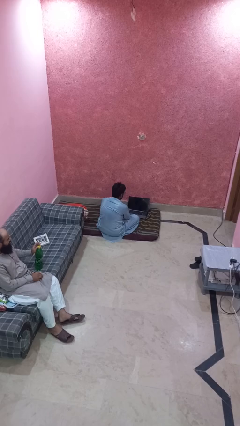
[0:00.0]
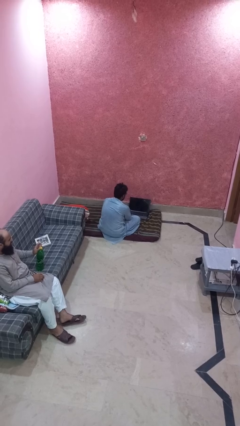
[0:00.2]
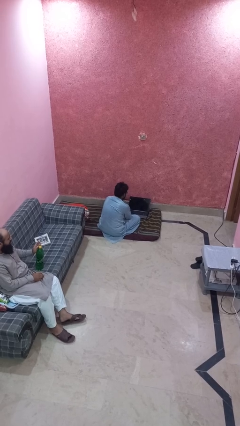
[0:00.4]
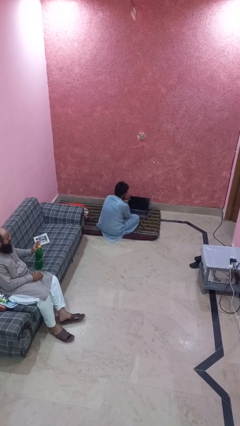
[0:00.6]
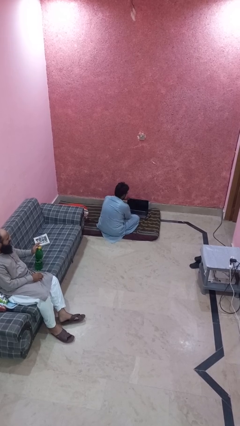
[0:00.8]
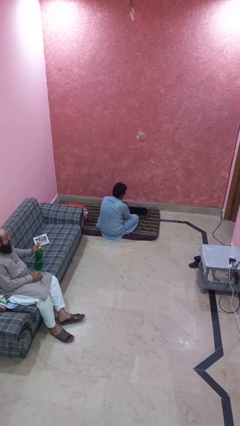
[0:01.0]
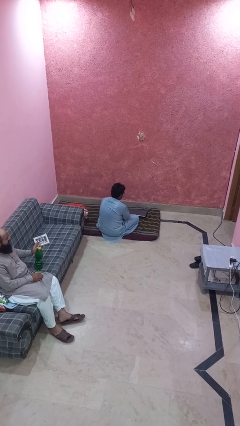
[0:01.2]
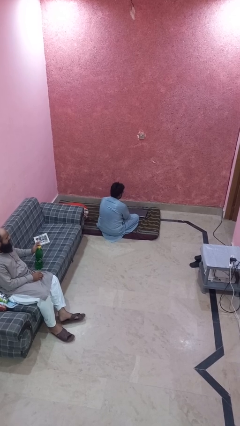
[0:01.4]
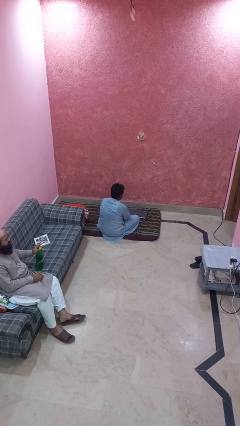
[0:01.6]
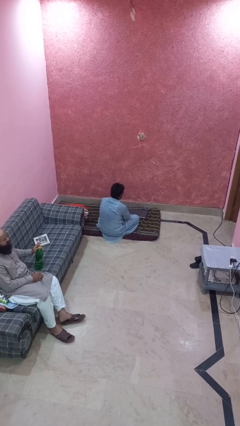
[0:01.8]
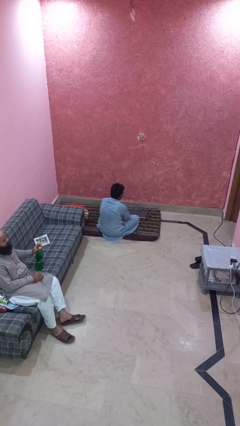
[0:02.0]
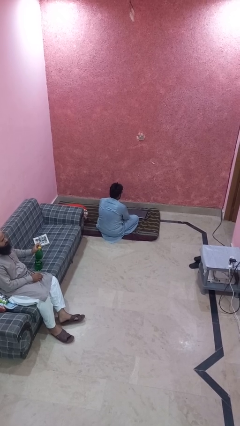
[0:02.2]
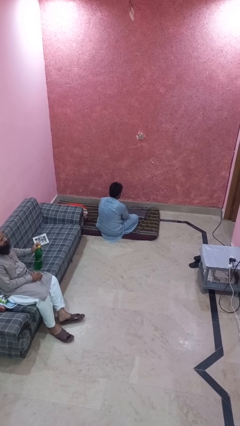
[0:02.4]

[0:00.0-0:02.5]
person closes laptop

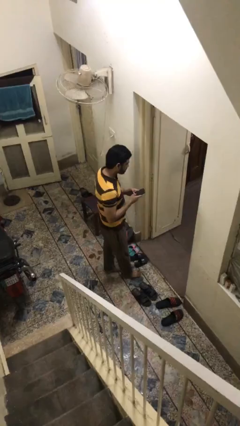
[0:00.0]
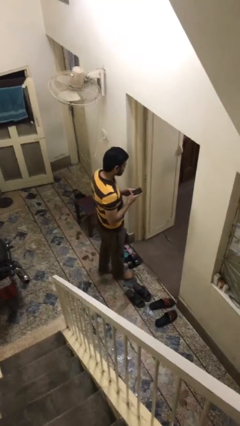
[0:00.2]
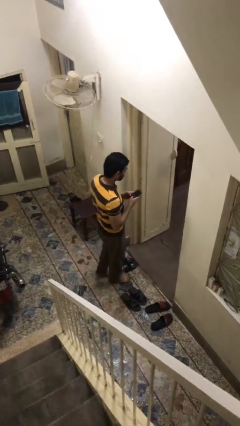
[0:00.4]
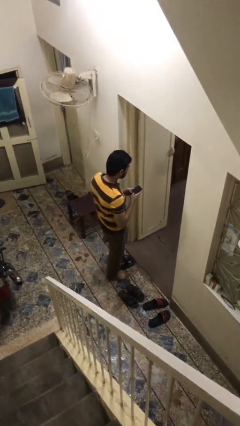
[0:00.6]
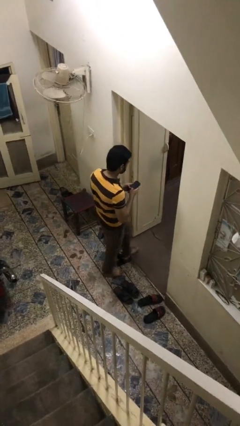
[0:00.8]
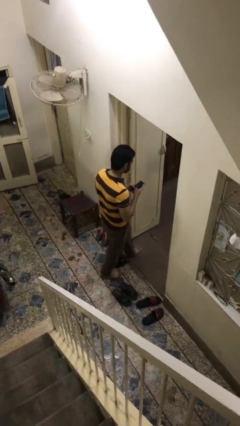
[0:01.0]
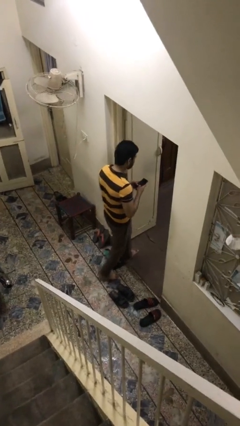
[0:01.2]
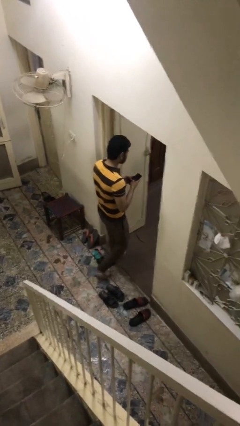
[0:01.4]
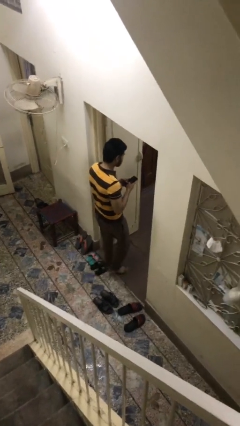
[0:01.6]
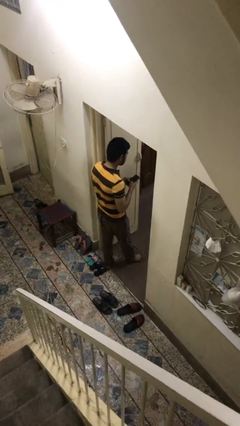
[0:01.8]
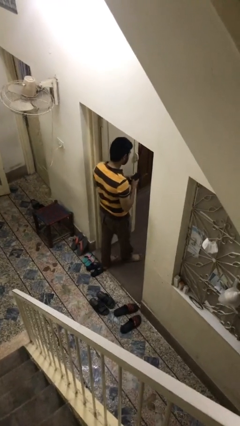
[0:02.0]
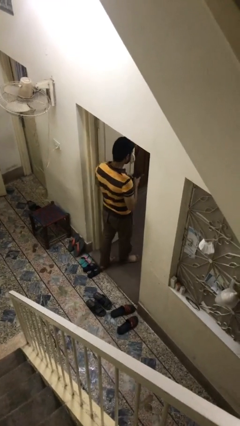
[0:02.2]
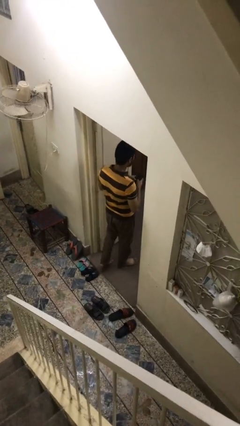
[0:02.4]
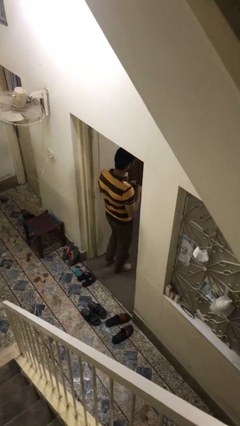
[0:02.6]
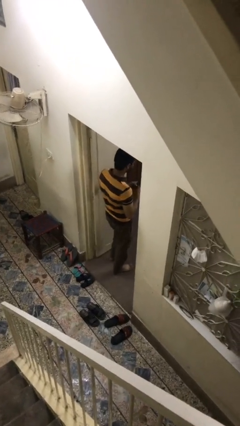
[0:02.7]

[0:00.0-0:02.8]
person exits scene through structure

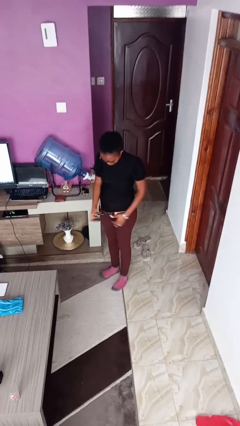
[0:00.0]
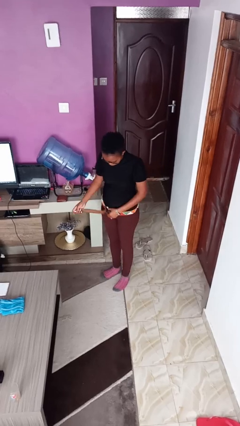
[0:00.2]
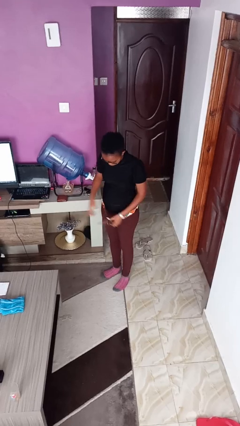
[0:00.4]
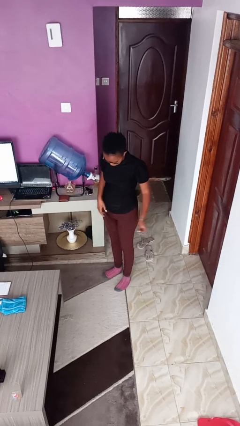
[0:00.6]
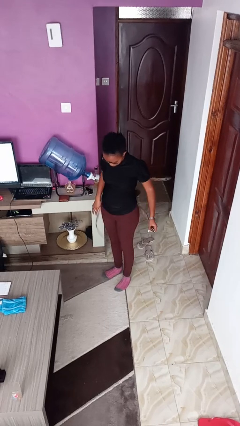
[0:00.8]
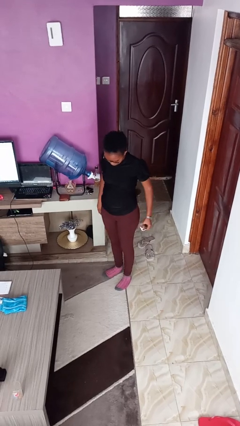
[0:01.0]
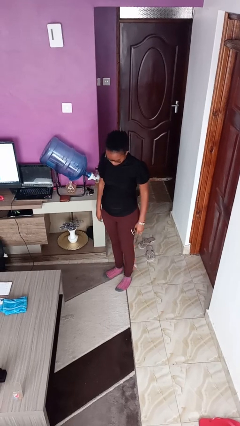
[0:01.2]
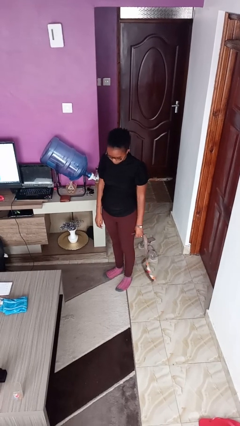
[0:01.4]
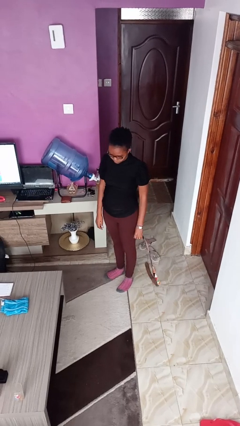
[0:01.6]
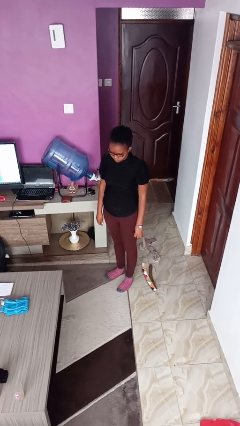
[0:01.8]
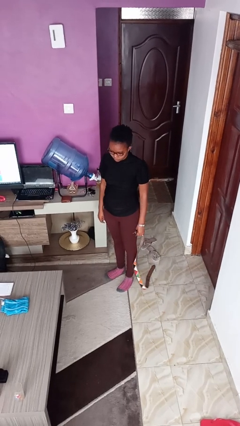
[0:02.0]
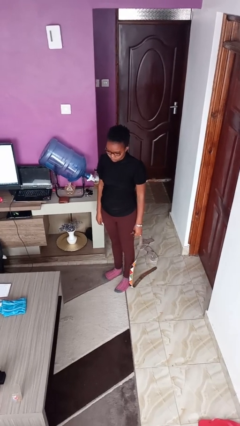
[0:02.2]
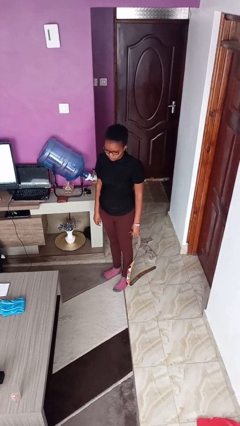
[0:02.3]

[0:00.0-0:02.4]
person takes off belt

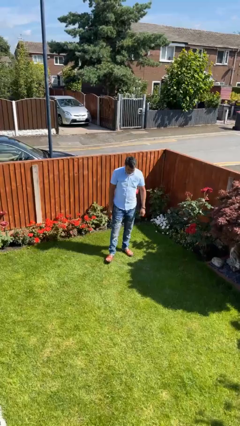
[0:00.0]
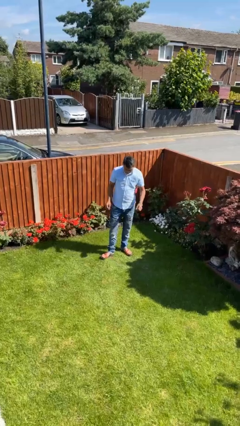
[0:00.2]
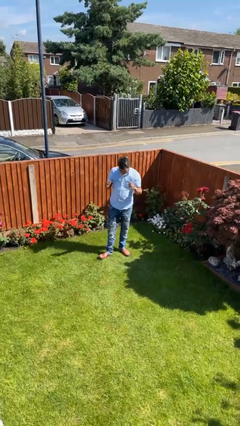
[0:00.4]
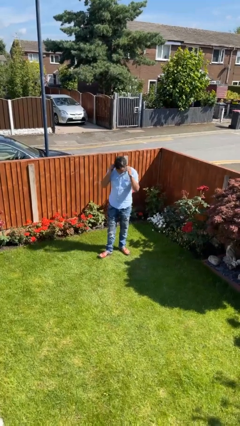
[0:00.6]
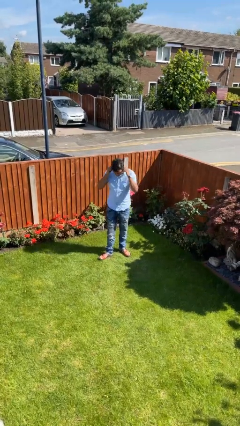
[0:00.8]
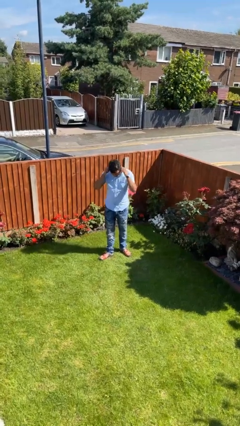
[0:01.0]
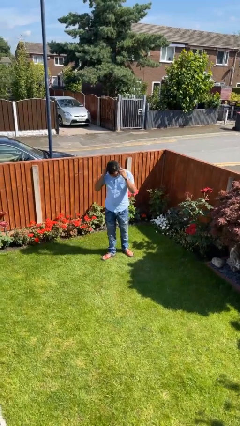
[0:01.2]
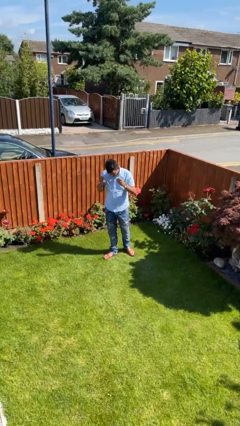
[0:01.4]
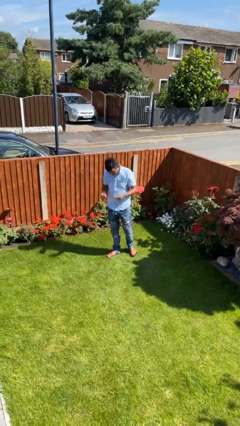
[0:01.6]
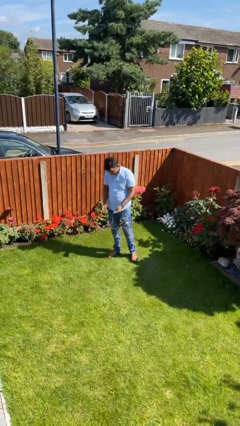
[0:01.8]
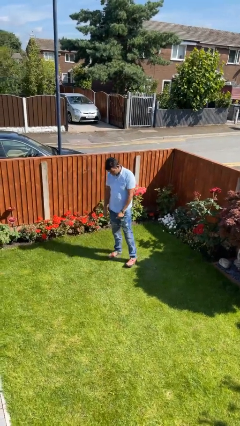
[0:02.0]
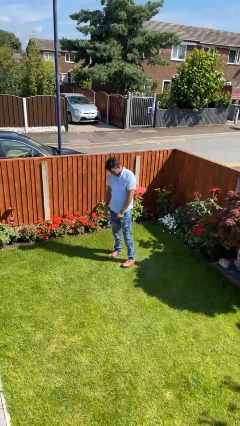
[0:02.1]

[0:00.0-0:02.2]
person takes off headphones

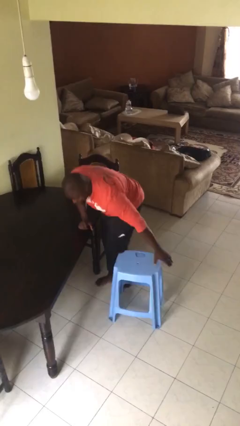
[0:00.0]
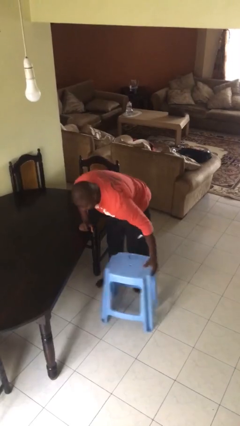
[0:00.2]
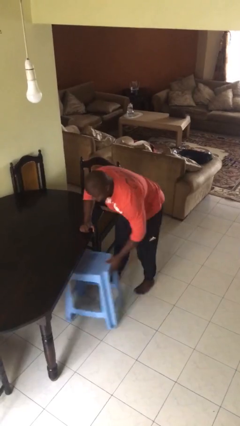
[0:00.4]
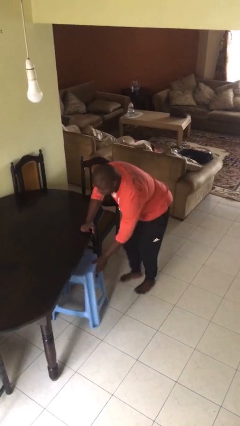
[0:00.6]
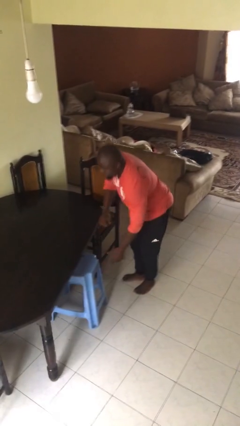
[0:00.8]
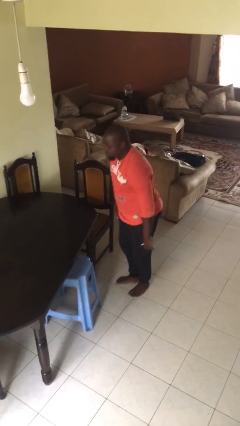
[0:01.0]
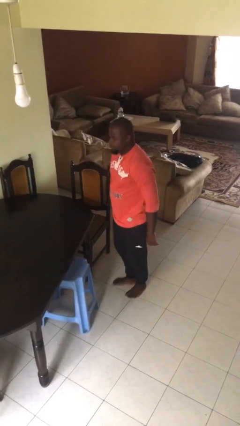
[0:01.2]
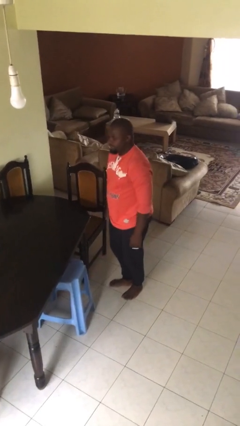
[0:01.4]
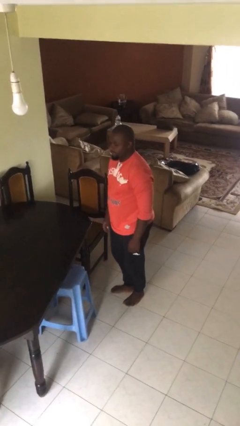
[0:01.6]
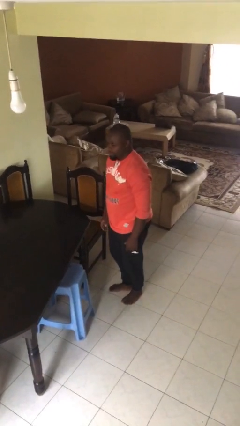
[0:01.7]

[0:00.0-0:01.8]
person stands up

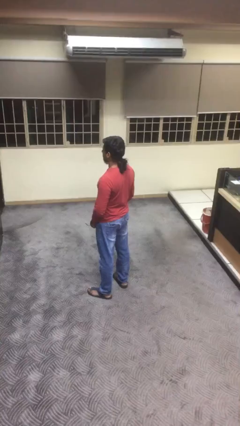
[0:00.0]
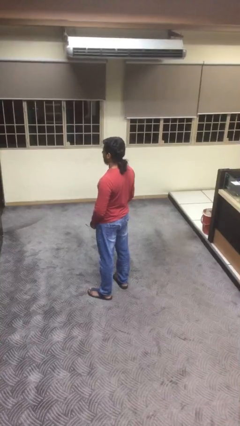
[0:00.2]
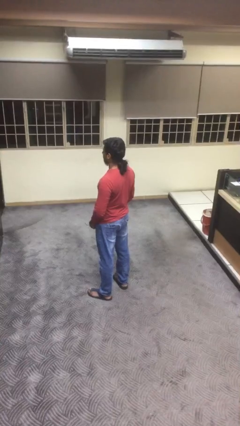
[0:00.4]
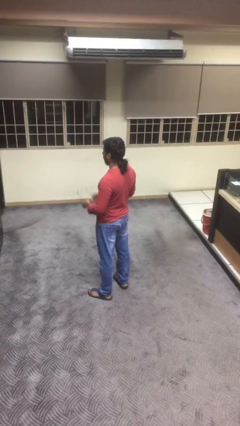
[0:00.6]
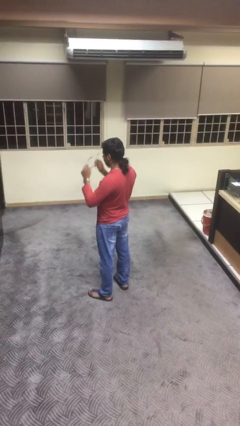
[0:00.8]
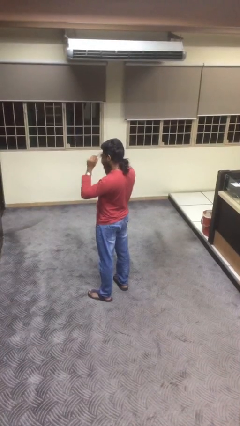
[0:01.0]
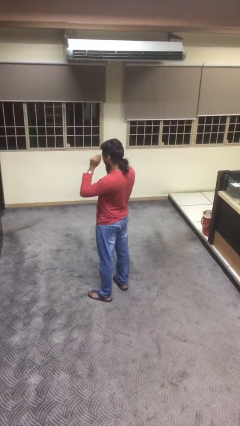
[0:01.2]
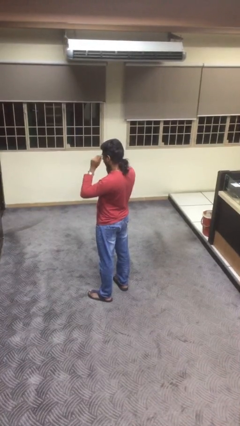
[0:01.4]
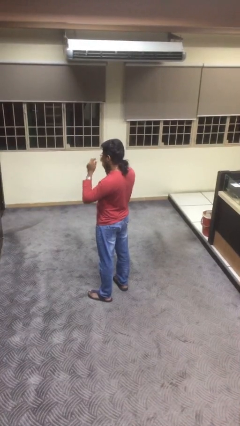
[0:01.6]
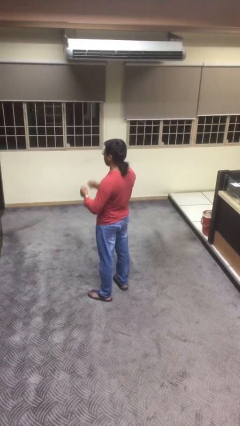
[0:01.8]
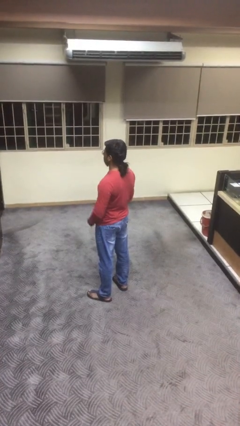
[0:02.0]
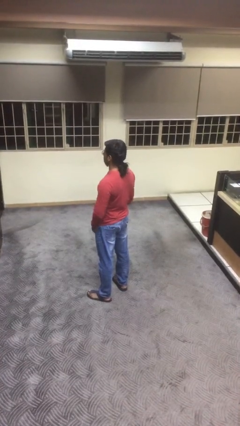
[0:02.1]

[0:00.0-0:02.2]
person puts on glasses

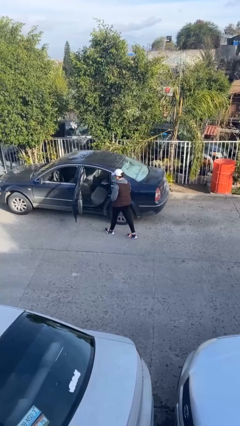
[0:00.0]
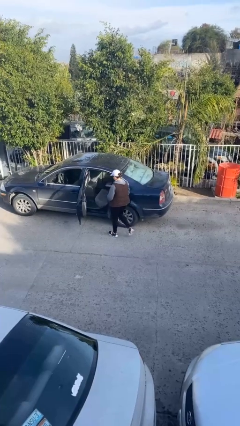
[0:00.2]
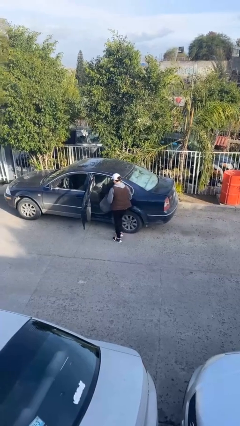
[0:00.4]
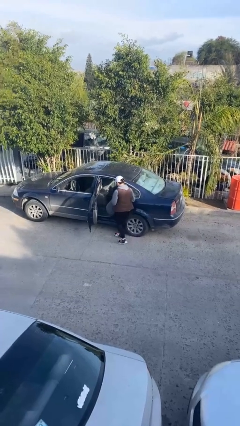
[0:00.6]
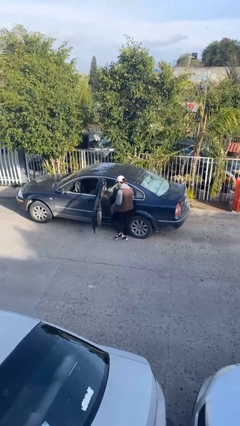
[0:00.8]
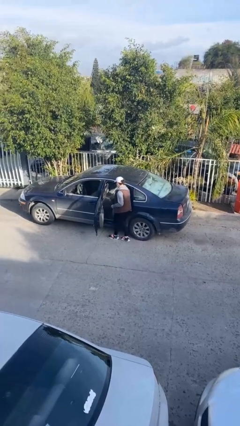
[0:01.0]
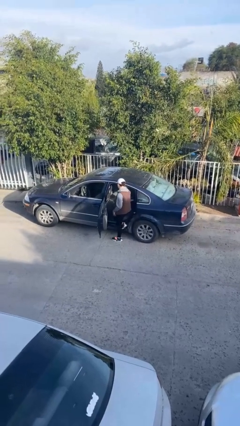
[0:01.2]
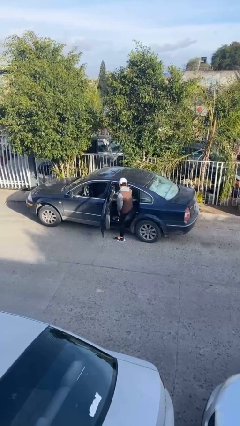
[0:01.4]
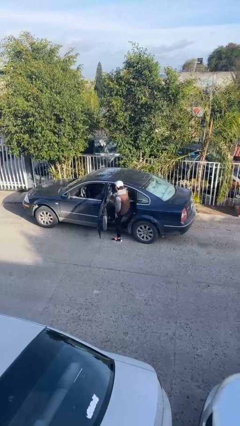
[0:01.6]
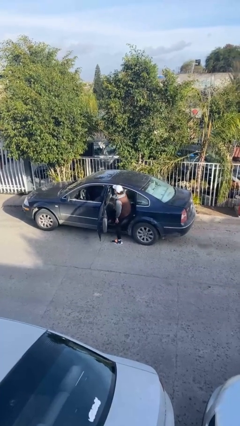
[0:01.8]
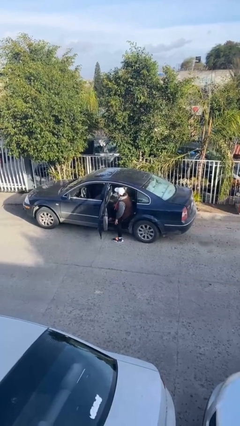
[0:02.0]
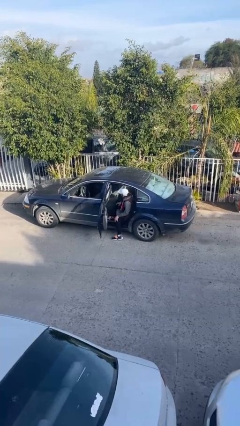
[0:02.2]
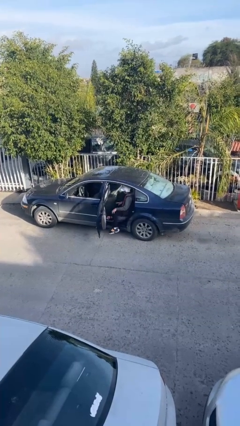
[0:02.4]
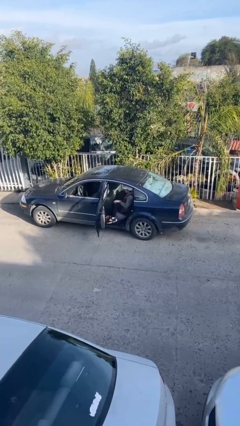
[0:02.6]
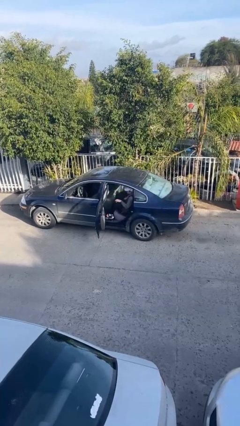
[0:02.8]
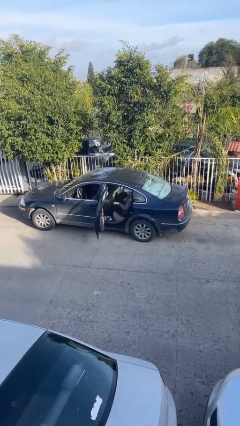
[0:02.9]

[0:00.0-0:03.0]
person enters car

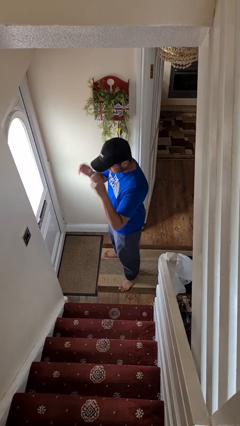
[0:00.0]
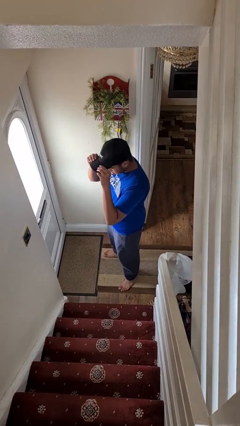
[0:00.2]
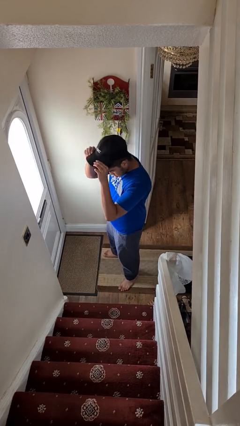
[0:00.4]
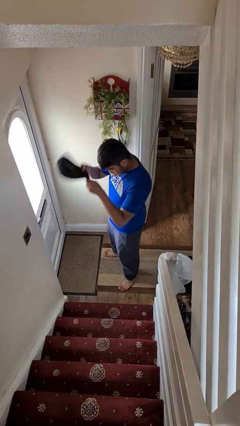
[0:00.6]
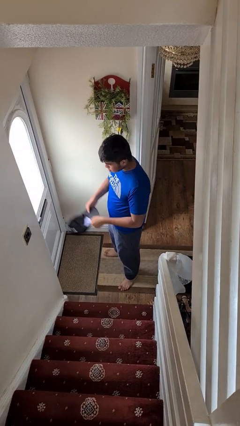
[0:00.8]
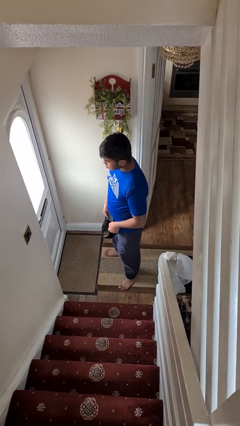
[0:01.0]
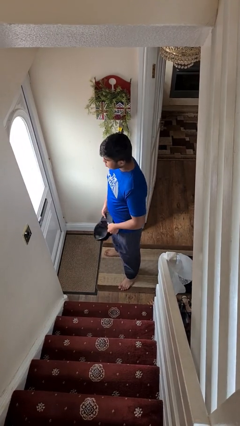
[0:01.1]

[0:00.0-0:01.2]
person takes off hat
